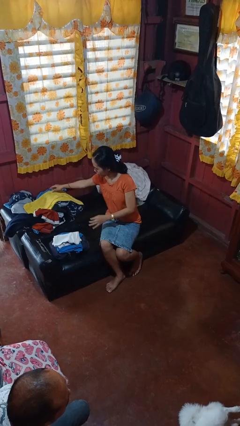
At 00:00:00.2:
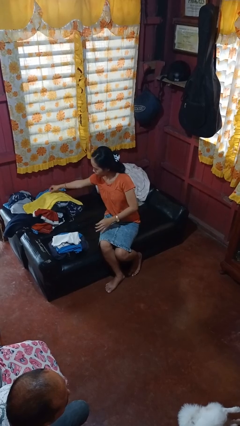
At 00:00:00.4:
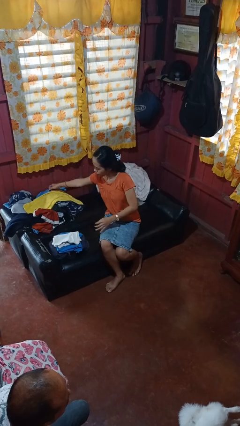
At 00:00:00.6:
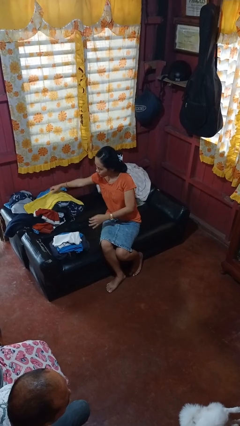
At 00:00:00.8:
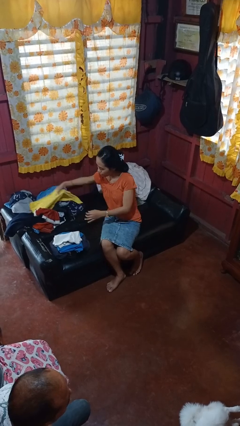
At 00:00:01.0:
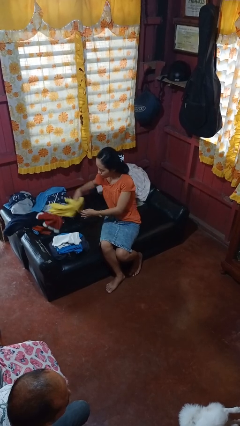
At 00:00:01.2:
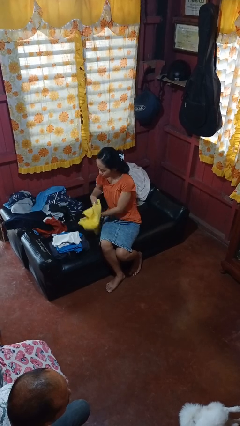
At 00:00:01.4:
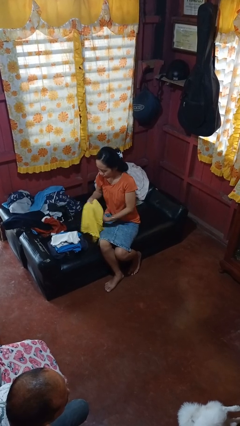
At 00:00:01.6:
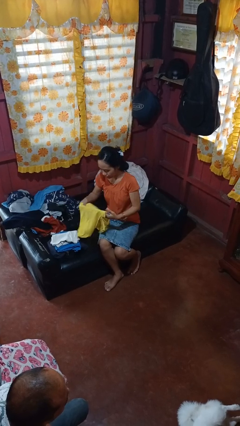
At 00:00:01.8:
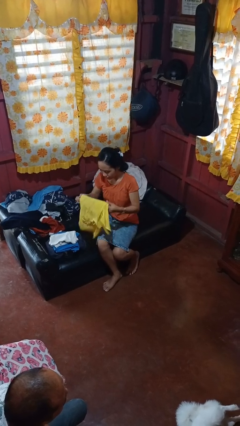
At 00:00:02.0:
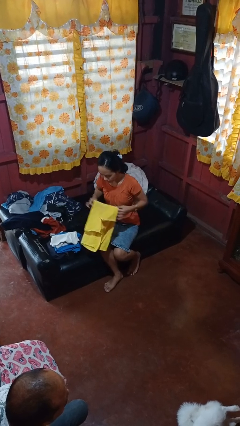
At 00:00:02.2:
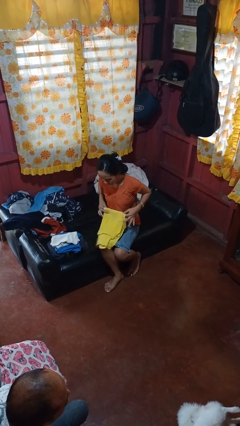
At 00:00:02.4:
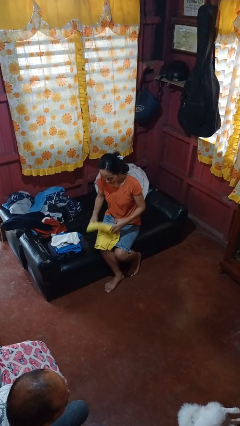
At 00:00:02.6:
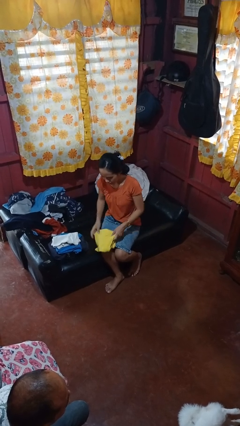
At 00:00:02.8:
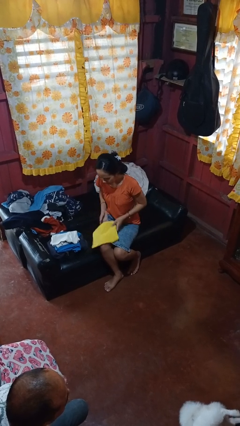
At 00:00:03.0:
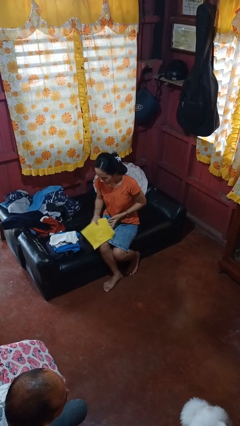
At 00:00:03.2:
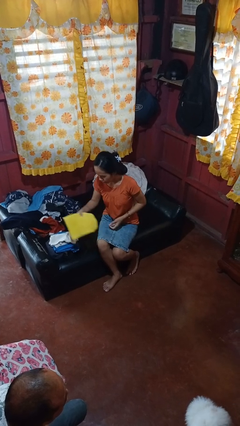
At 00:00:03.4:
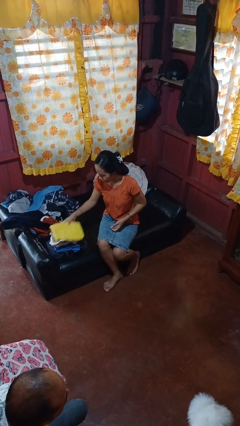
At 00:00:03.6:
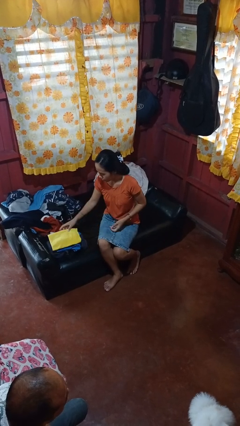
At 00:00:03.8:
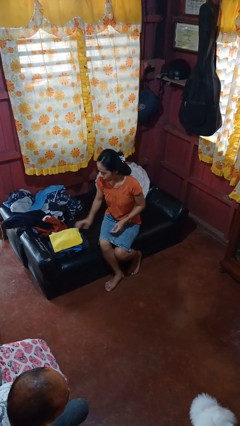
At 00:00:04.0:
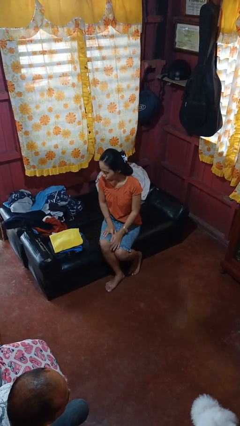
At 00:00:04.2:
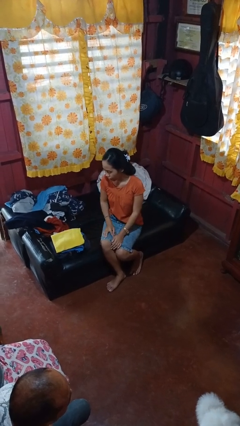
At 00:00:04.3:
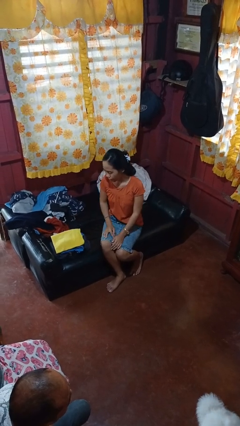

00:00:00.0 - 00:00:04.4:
person folds shirt

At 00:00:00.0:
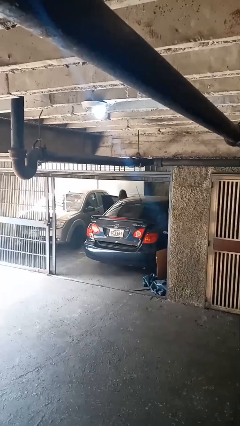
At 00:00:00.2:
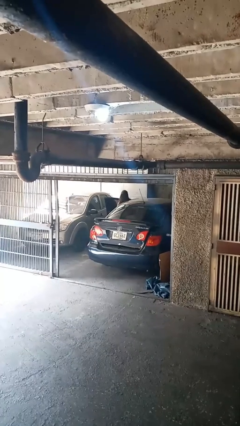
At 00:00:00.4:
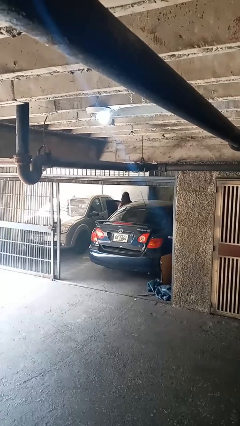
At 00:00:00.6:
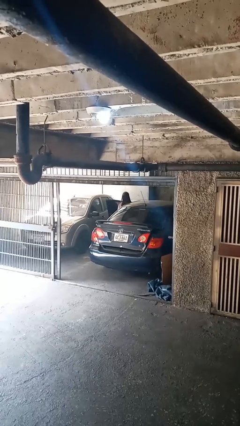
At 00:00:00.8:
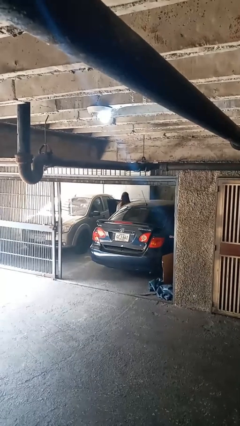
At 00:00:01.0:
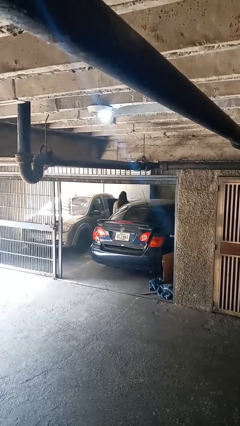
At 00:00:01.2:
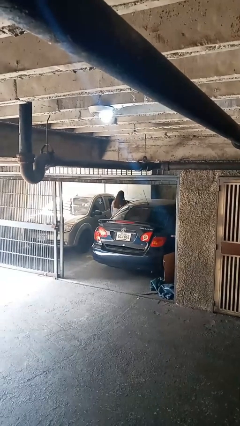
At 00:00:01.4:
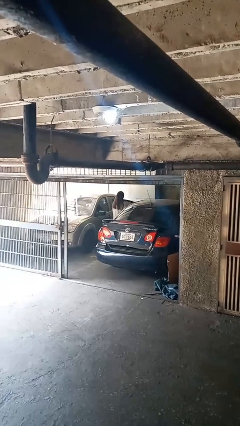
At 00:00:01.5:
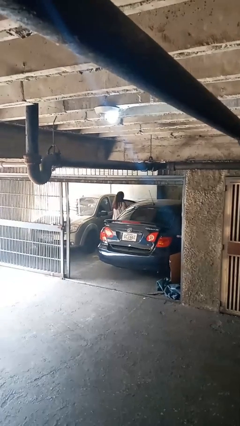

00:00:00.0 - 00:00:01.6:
person exits car

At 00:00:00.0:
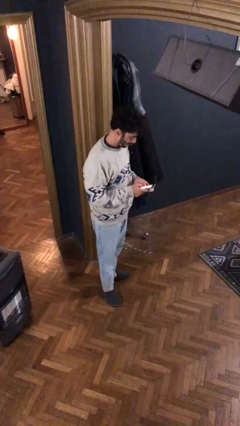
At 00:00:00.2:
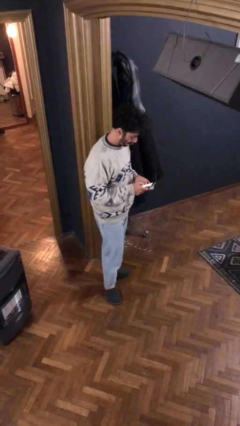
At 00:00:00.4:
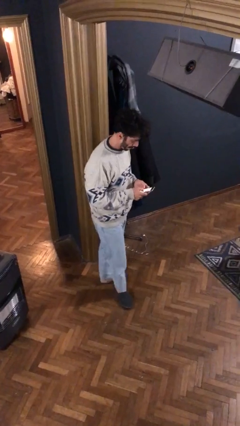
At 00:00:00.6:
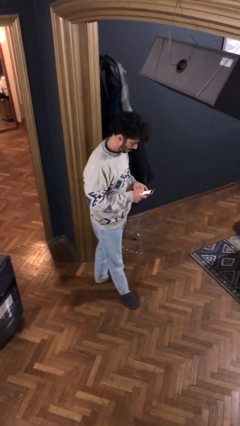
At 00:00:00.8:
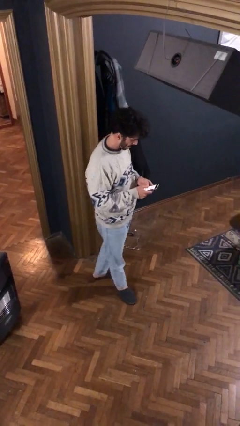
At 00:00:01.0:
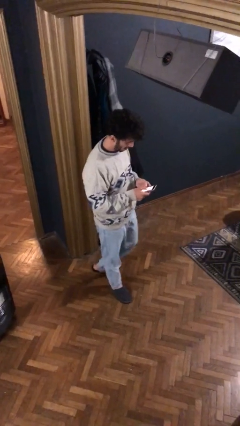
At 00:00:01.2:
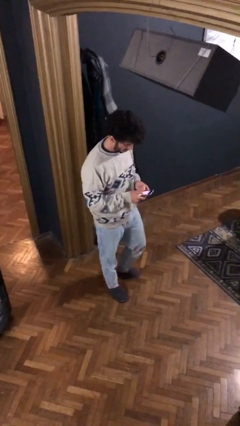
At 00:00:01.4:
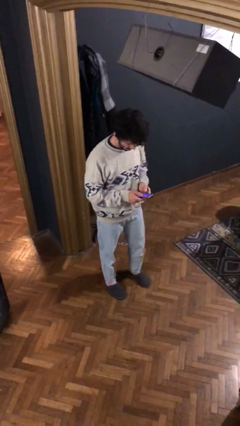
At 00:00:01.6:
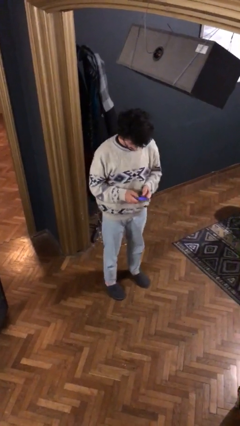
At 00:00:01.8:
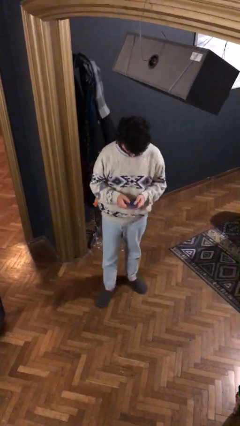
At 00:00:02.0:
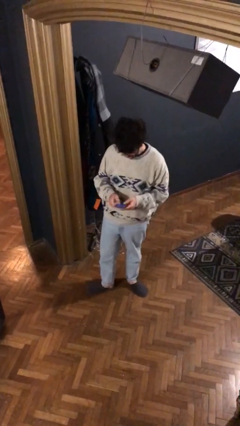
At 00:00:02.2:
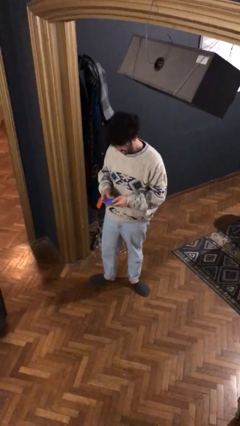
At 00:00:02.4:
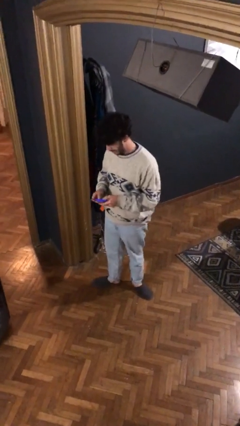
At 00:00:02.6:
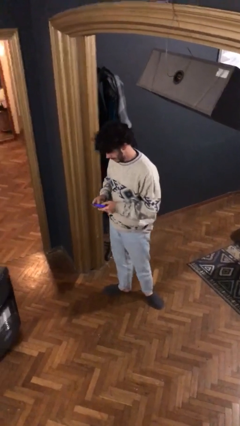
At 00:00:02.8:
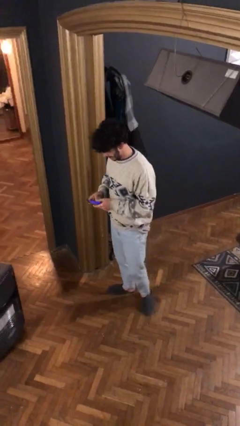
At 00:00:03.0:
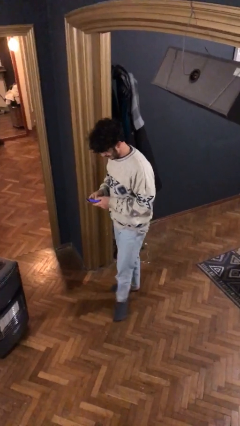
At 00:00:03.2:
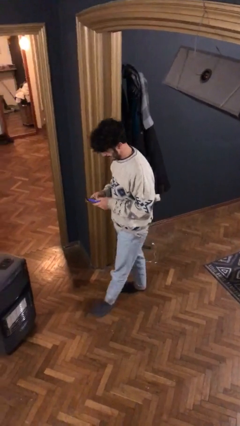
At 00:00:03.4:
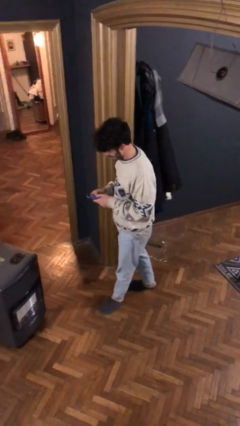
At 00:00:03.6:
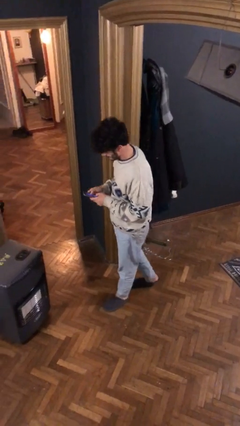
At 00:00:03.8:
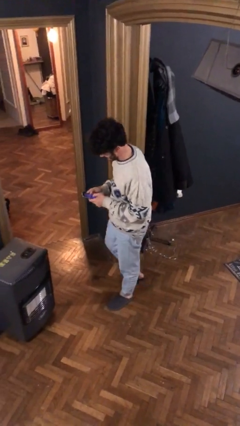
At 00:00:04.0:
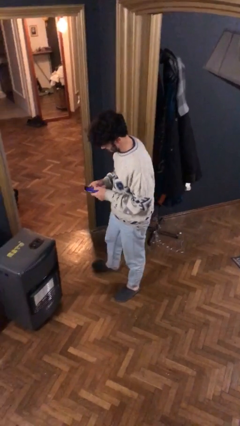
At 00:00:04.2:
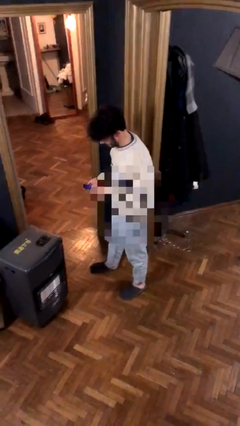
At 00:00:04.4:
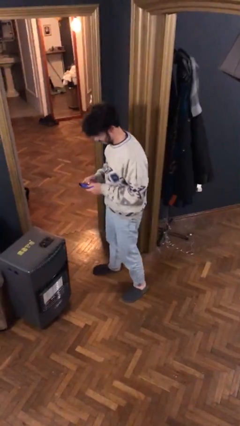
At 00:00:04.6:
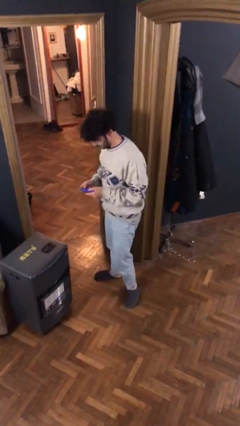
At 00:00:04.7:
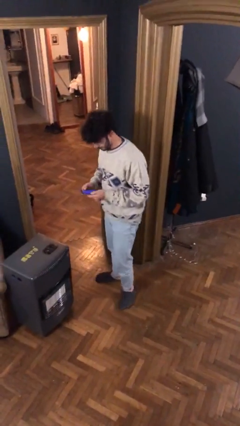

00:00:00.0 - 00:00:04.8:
person texts on phone

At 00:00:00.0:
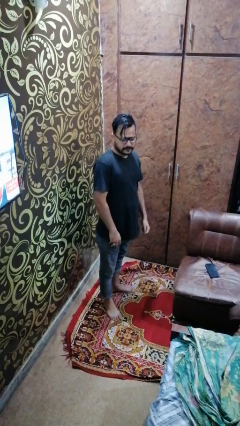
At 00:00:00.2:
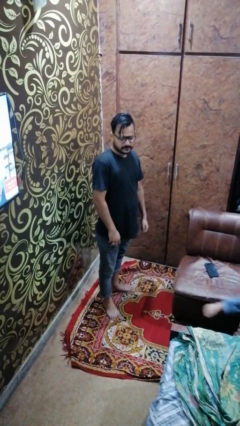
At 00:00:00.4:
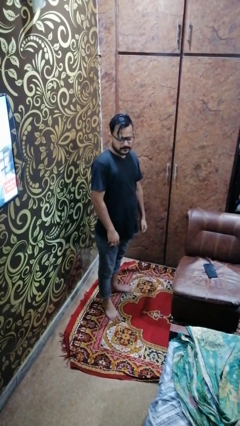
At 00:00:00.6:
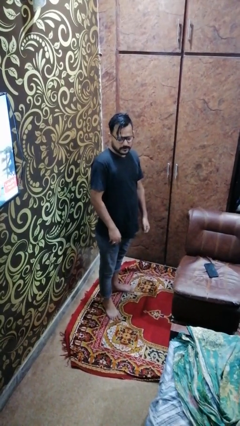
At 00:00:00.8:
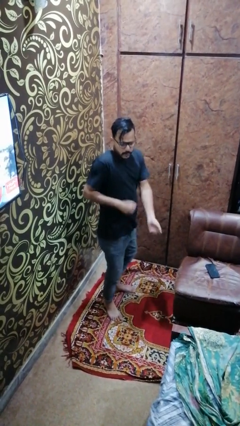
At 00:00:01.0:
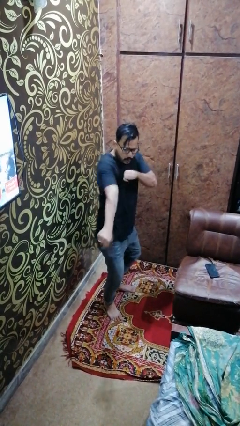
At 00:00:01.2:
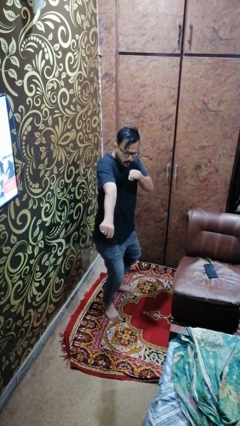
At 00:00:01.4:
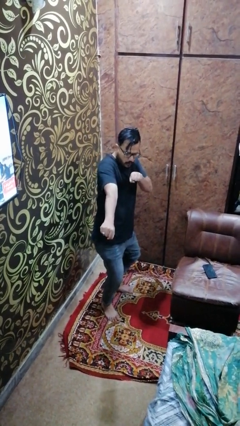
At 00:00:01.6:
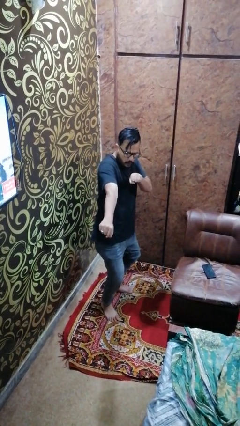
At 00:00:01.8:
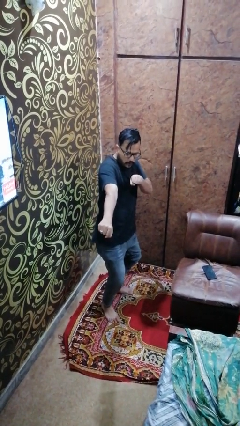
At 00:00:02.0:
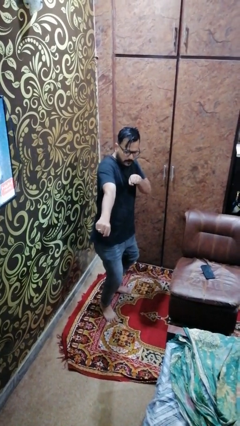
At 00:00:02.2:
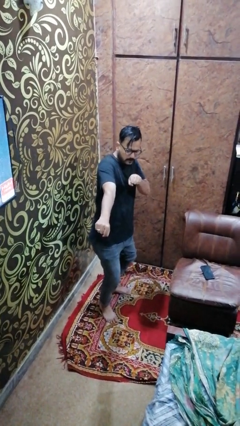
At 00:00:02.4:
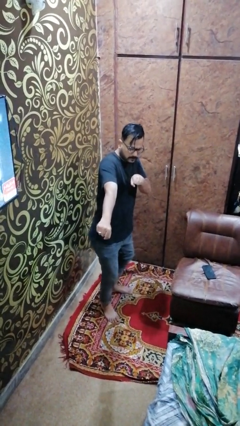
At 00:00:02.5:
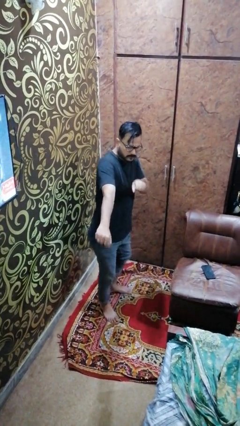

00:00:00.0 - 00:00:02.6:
person karate chop

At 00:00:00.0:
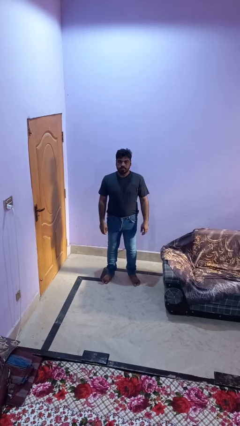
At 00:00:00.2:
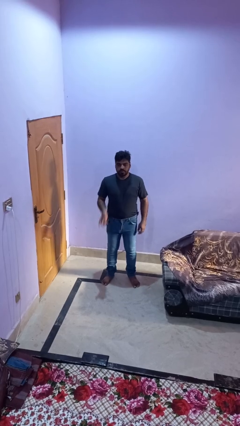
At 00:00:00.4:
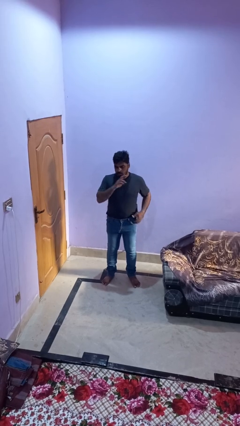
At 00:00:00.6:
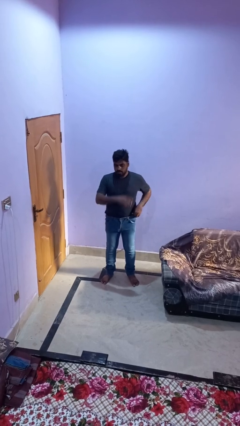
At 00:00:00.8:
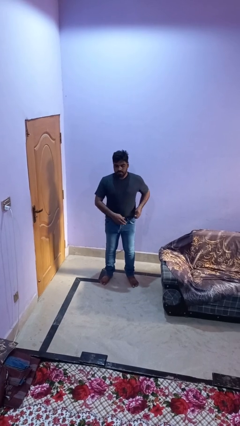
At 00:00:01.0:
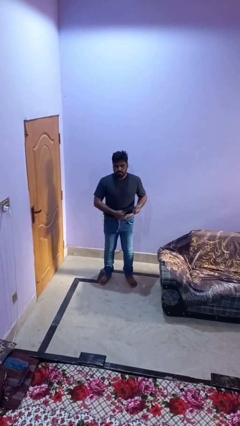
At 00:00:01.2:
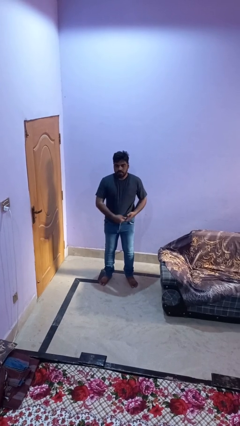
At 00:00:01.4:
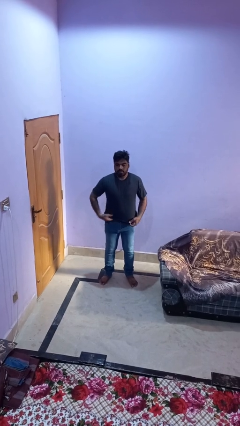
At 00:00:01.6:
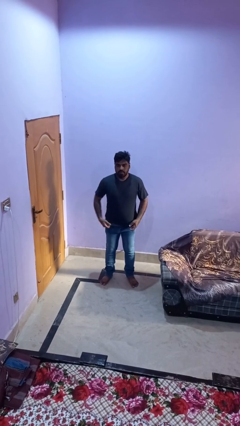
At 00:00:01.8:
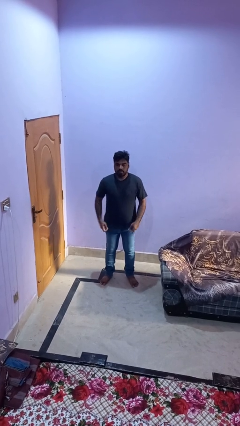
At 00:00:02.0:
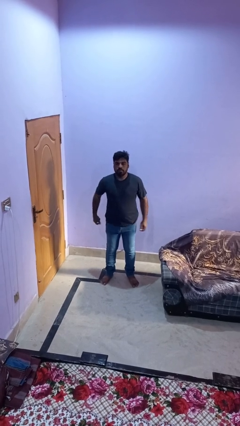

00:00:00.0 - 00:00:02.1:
person untucks shirt

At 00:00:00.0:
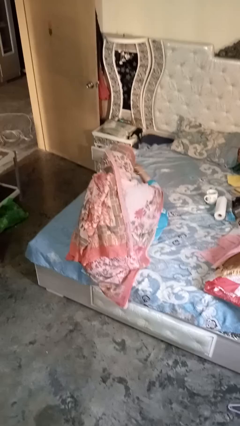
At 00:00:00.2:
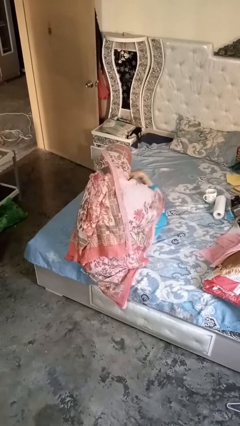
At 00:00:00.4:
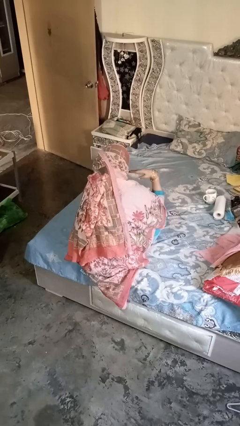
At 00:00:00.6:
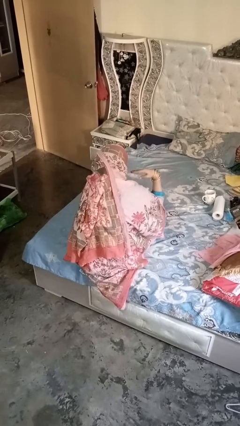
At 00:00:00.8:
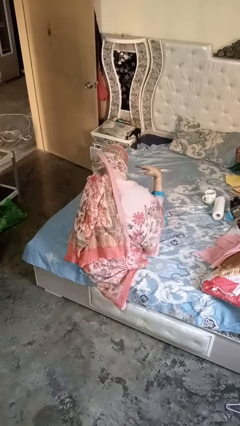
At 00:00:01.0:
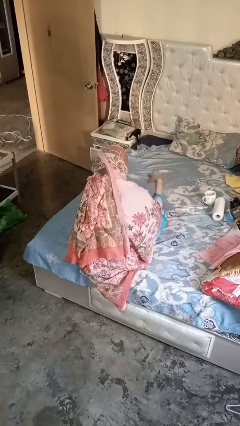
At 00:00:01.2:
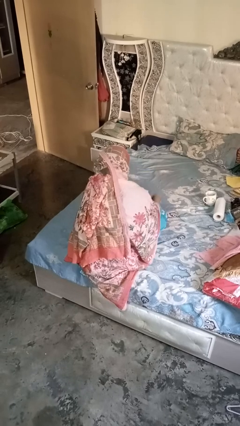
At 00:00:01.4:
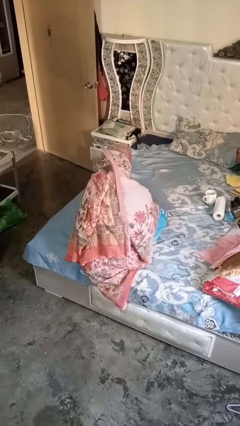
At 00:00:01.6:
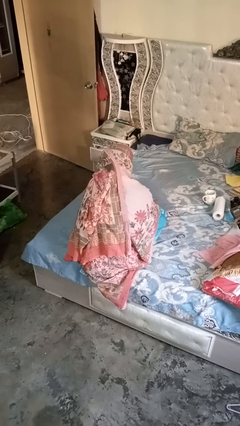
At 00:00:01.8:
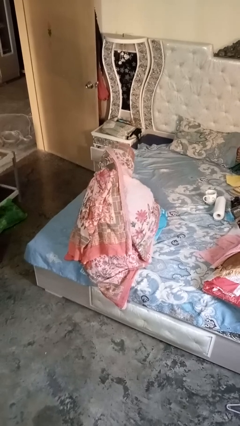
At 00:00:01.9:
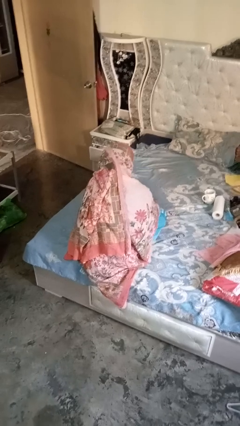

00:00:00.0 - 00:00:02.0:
person gestures cut
